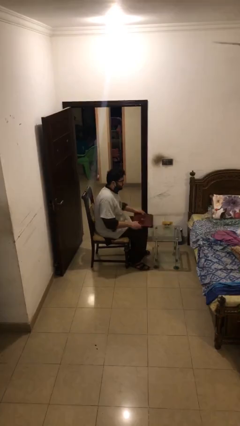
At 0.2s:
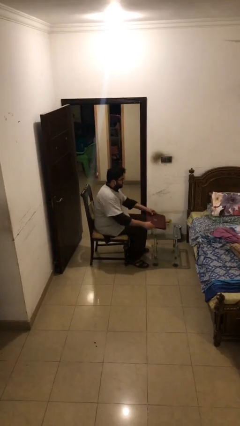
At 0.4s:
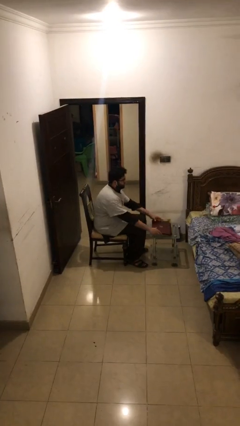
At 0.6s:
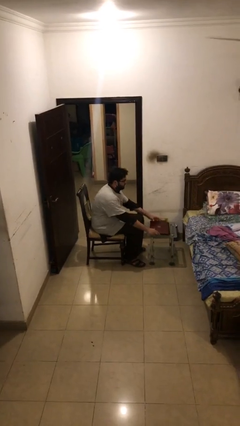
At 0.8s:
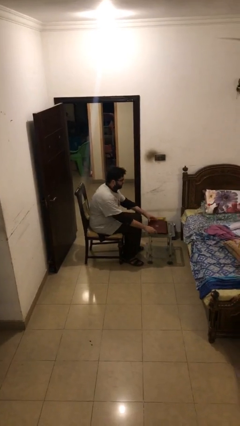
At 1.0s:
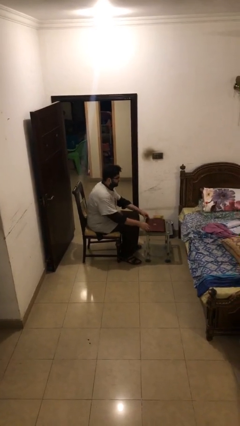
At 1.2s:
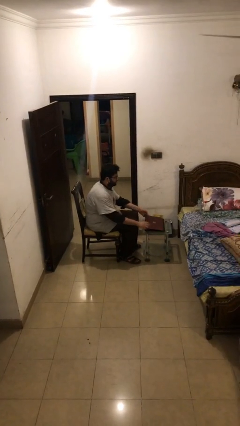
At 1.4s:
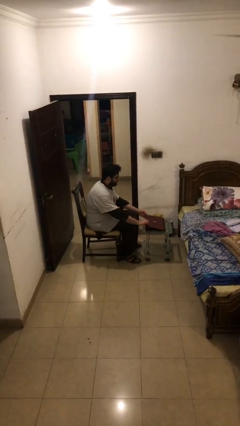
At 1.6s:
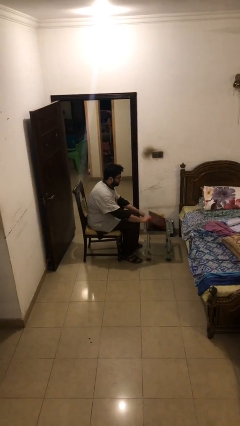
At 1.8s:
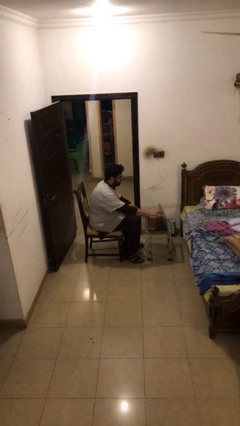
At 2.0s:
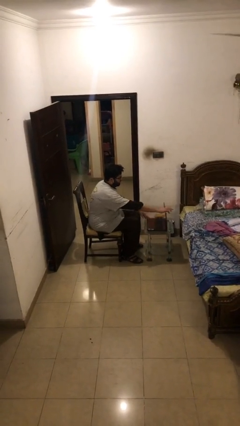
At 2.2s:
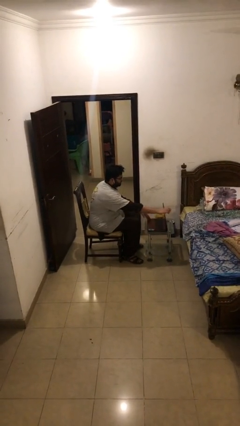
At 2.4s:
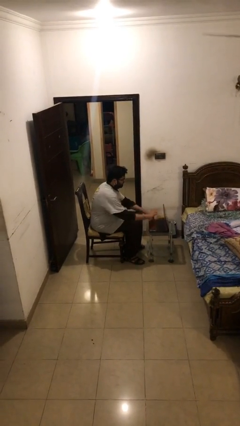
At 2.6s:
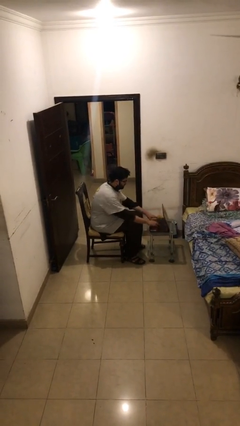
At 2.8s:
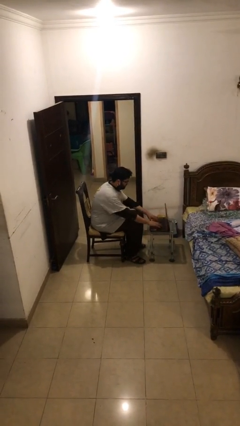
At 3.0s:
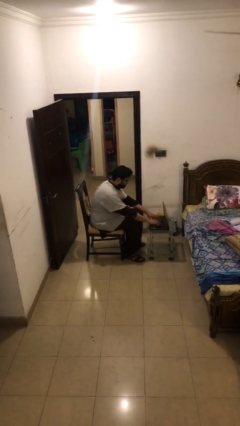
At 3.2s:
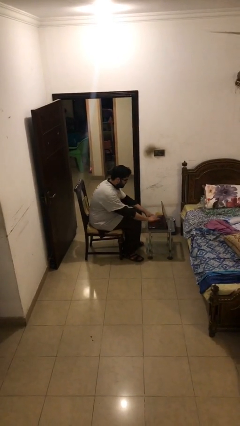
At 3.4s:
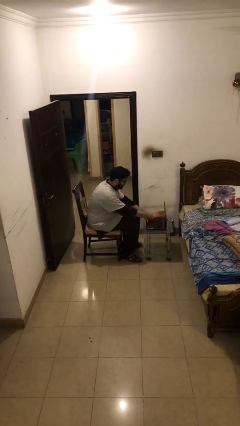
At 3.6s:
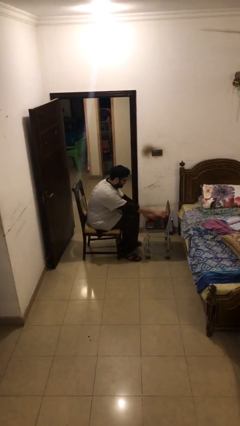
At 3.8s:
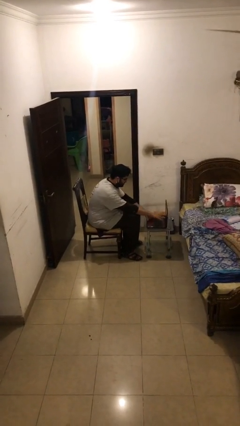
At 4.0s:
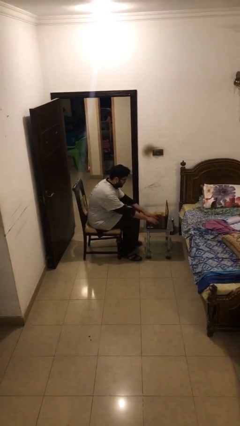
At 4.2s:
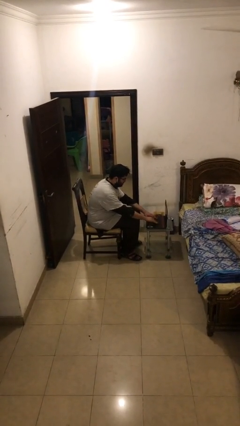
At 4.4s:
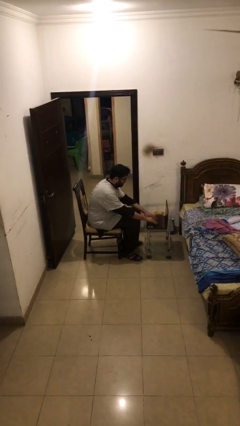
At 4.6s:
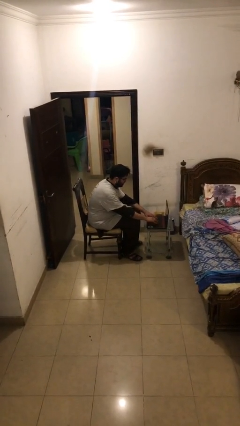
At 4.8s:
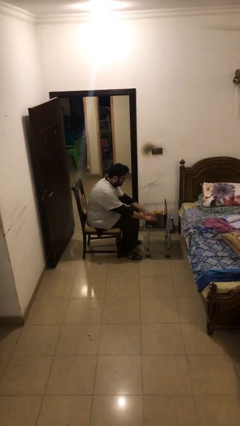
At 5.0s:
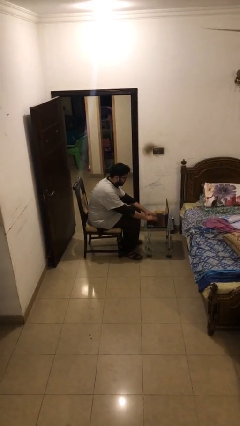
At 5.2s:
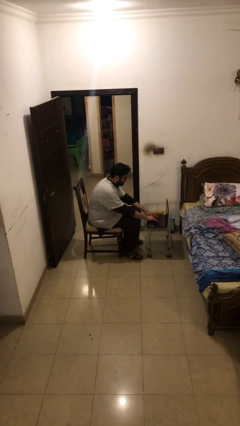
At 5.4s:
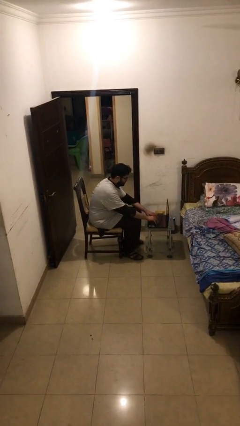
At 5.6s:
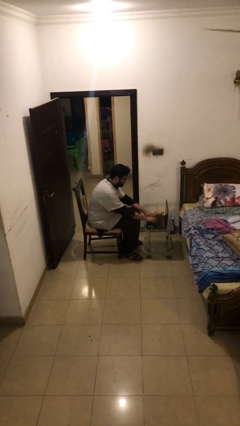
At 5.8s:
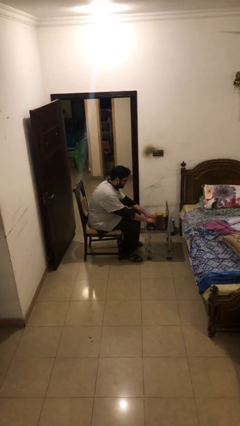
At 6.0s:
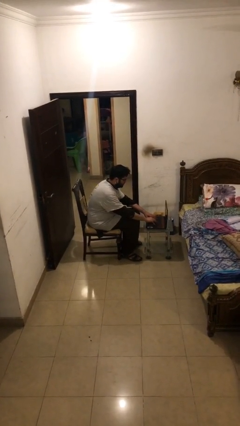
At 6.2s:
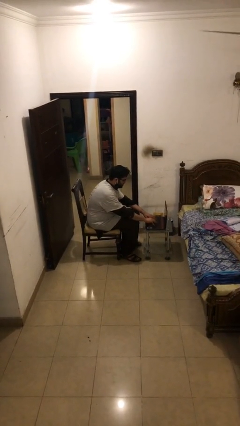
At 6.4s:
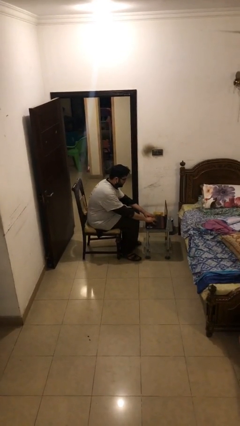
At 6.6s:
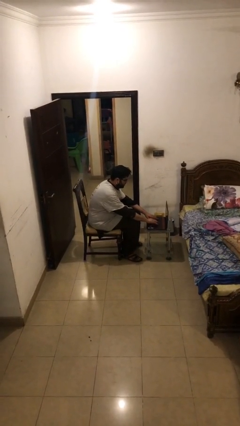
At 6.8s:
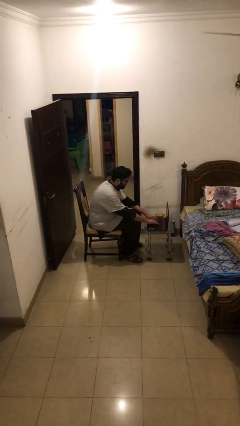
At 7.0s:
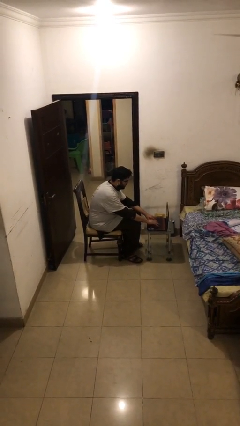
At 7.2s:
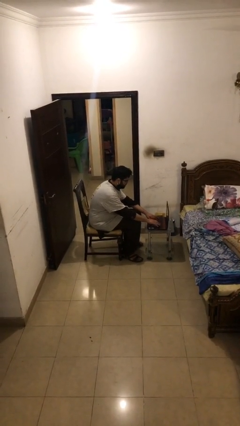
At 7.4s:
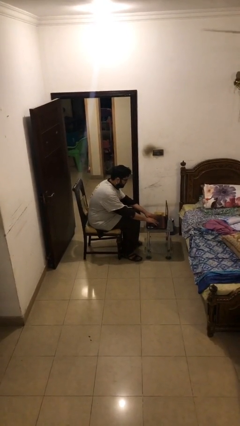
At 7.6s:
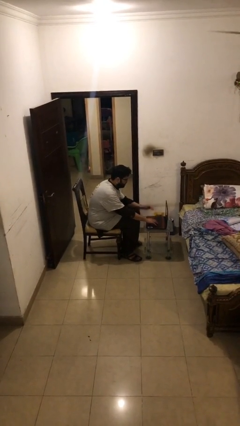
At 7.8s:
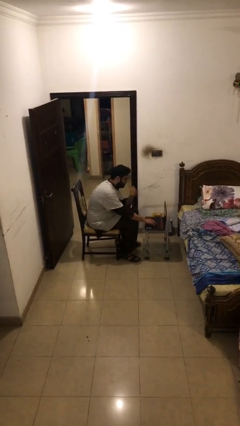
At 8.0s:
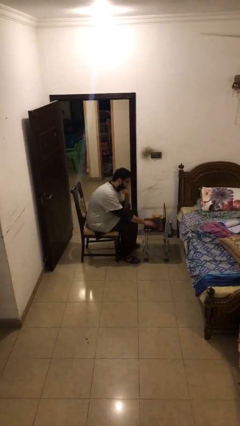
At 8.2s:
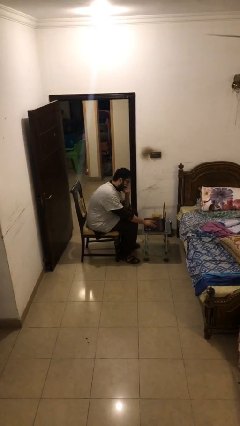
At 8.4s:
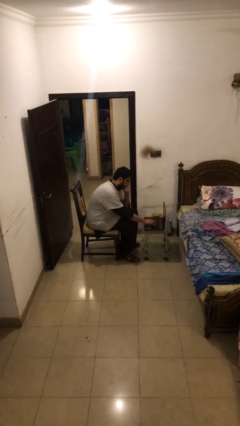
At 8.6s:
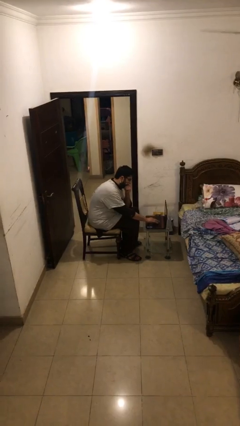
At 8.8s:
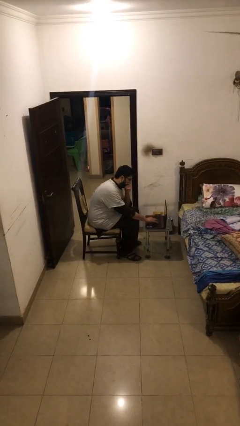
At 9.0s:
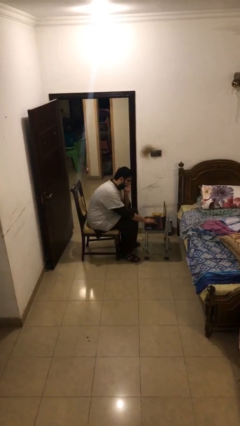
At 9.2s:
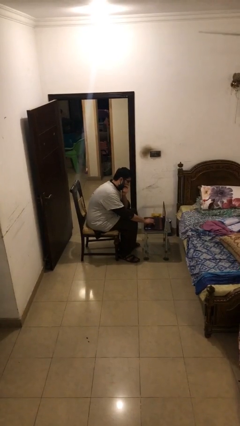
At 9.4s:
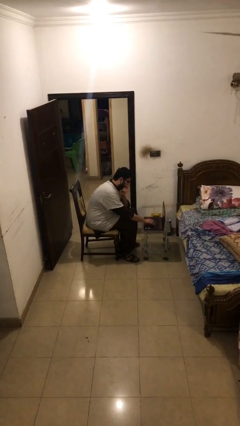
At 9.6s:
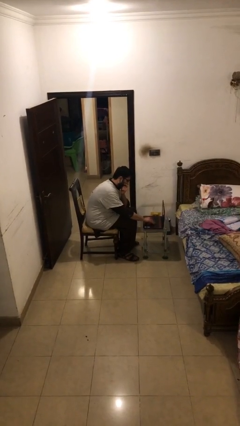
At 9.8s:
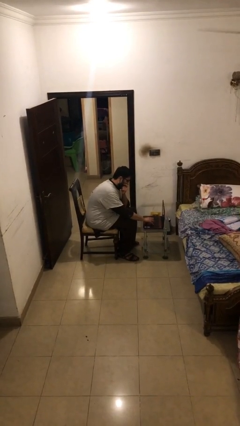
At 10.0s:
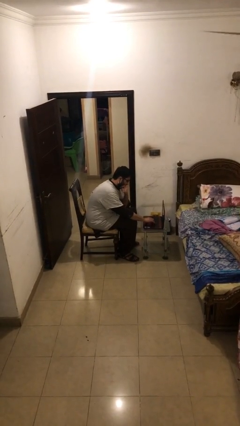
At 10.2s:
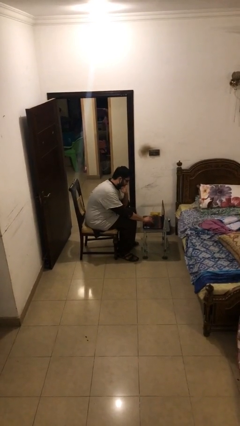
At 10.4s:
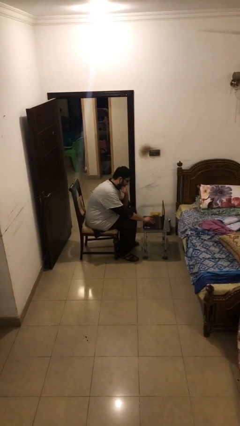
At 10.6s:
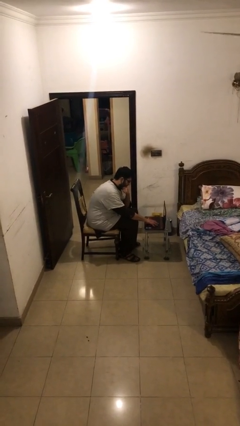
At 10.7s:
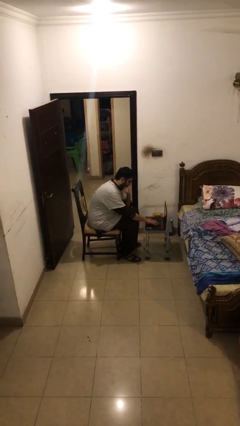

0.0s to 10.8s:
person interacts with laptop

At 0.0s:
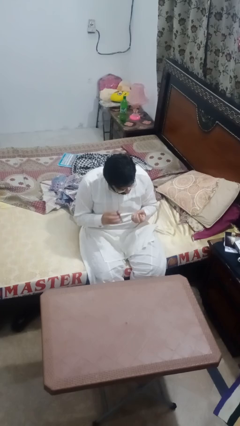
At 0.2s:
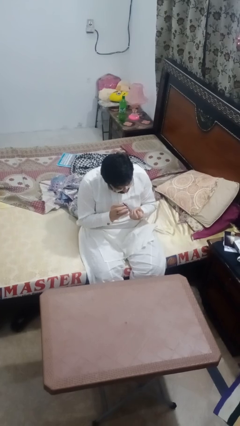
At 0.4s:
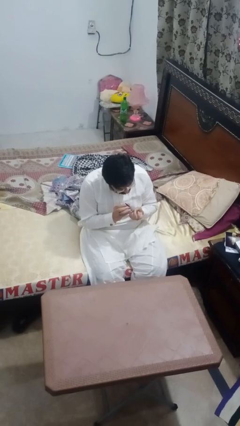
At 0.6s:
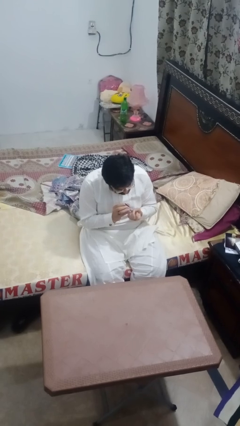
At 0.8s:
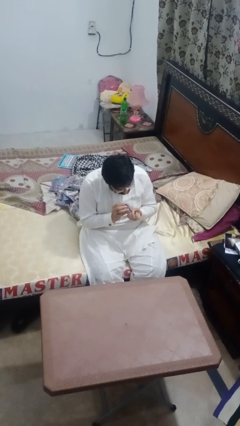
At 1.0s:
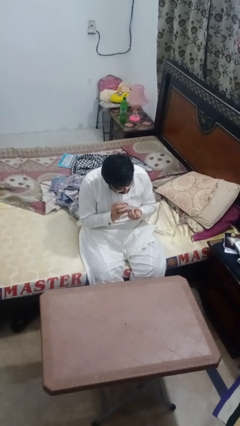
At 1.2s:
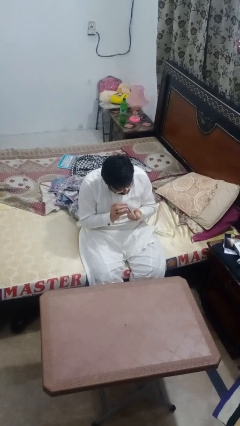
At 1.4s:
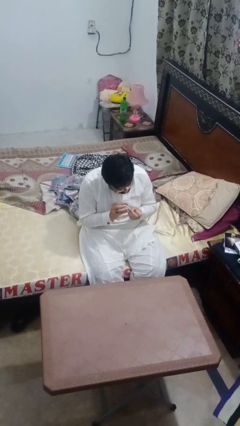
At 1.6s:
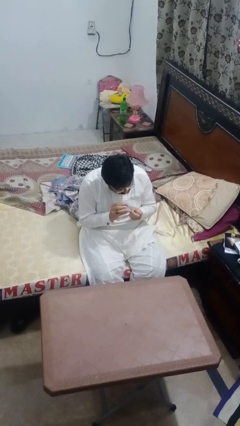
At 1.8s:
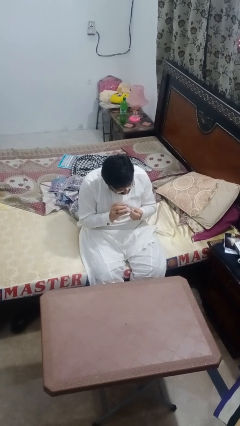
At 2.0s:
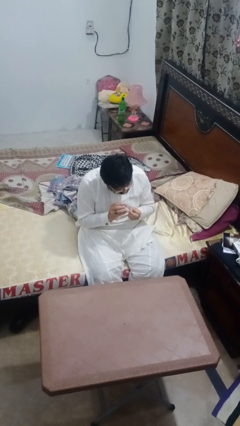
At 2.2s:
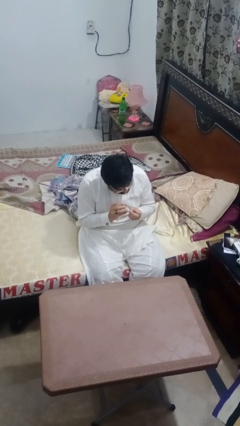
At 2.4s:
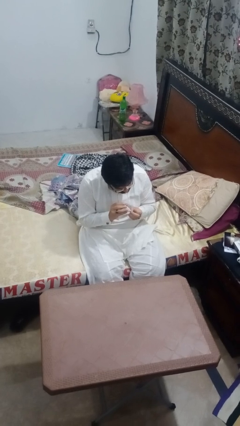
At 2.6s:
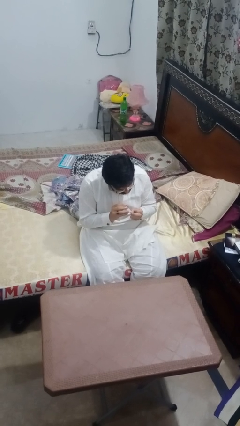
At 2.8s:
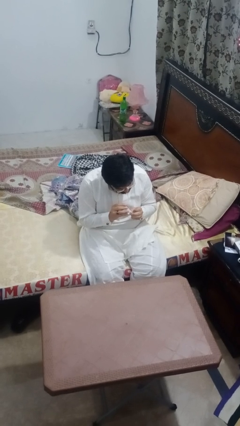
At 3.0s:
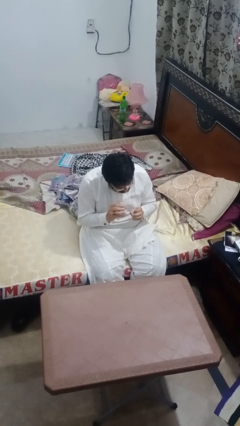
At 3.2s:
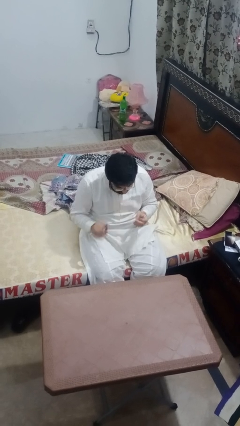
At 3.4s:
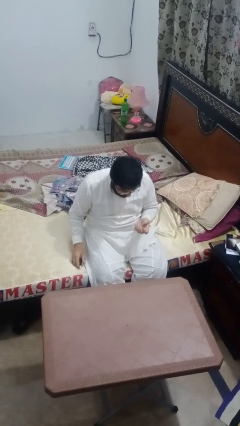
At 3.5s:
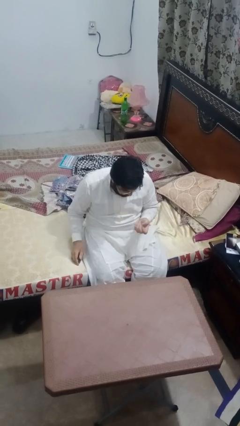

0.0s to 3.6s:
person clips fingernails

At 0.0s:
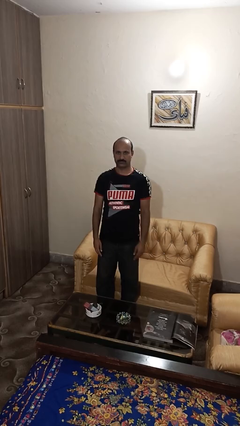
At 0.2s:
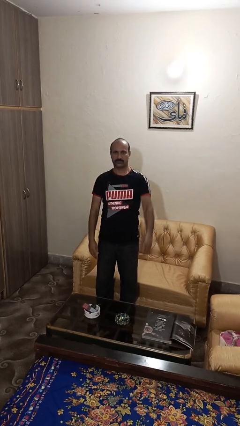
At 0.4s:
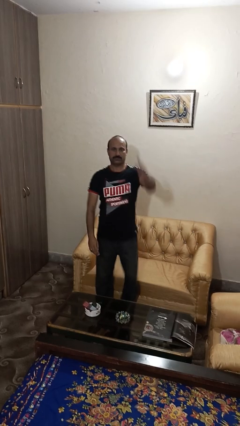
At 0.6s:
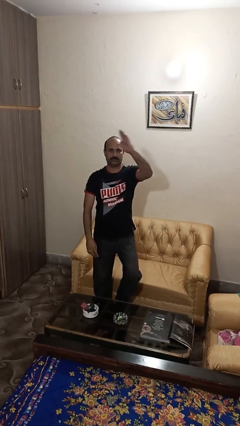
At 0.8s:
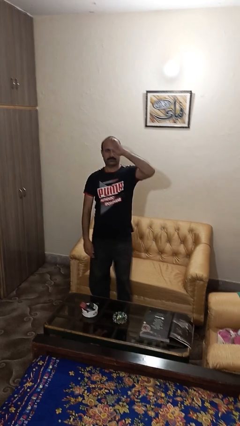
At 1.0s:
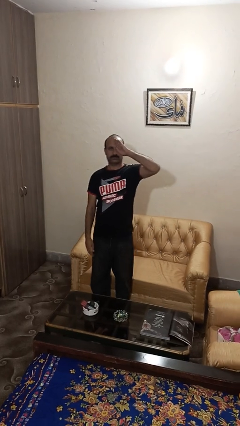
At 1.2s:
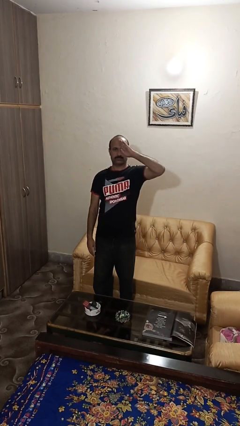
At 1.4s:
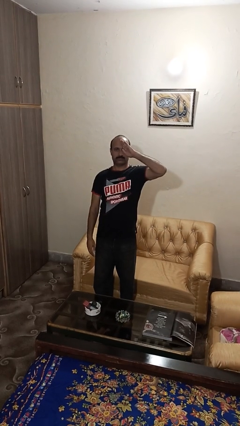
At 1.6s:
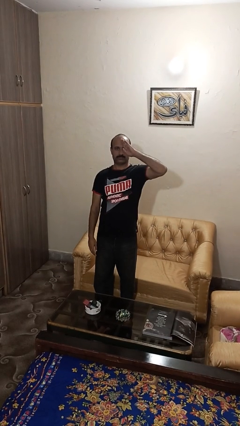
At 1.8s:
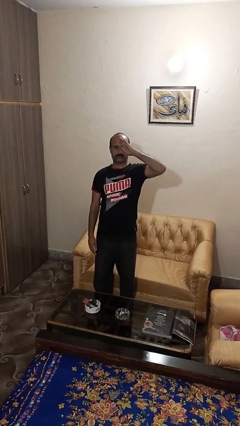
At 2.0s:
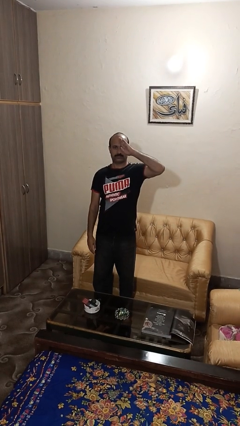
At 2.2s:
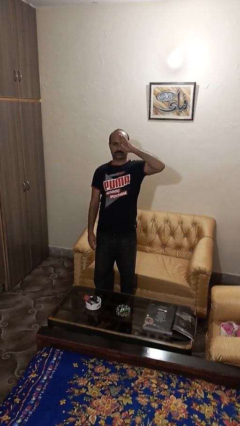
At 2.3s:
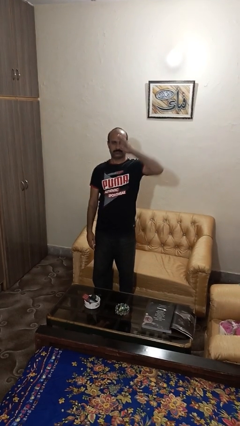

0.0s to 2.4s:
person salutes

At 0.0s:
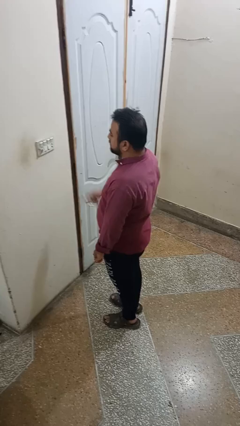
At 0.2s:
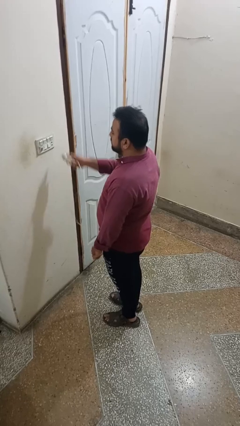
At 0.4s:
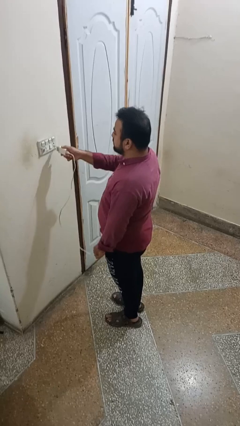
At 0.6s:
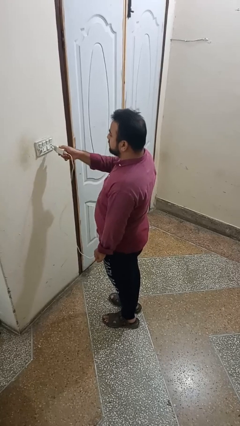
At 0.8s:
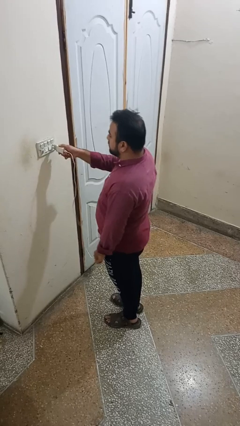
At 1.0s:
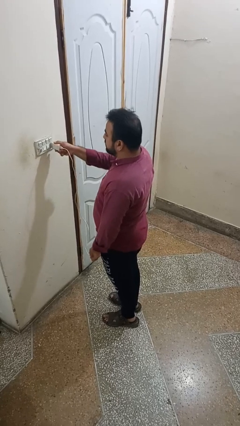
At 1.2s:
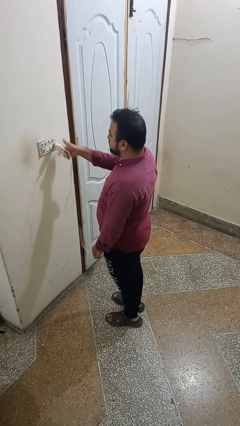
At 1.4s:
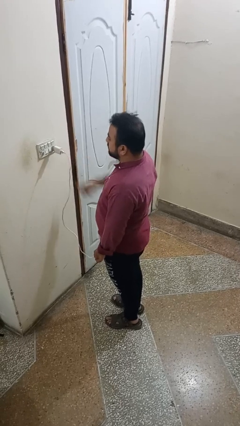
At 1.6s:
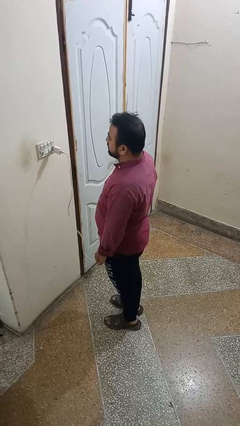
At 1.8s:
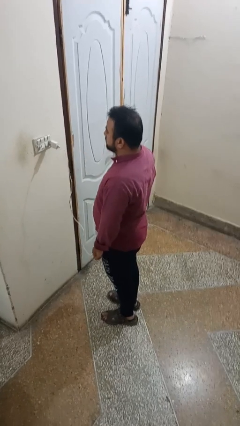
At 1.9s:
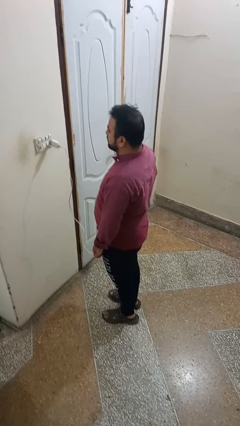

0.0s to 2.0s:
person plugs into electrical socket
